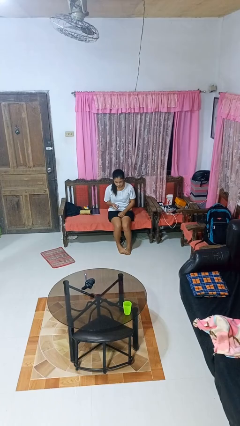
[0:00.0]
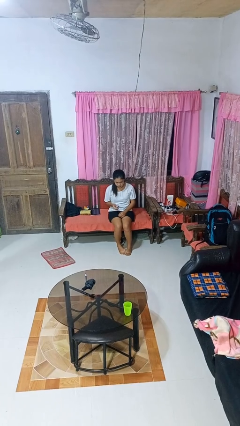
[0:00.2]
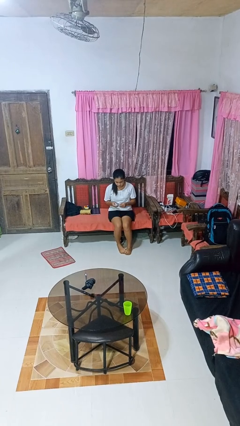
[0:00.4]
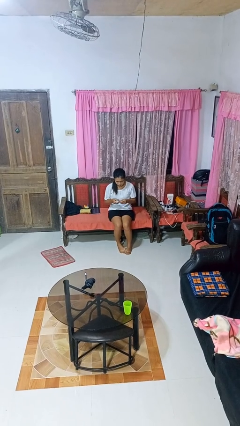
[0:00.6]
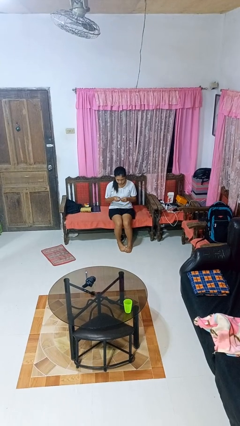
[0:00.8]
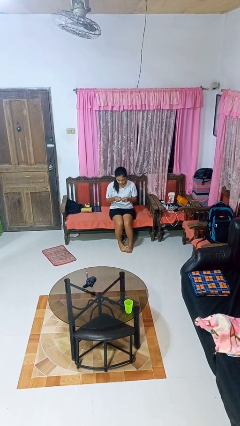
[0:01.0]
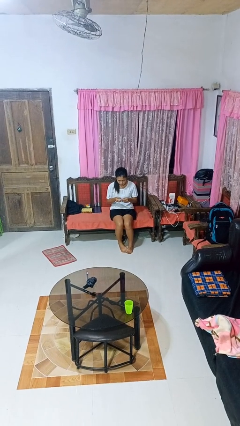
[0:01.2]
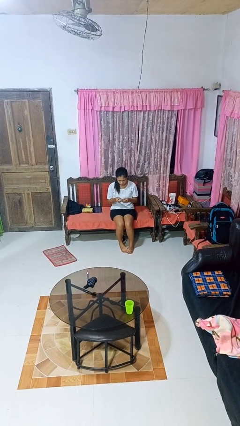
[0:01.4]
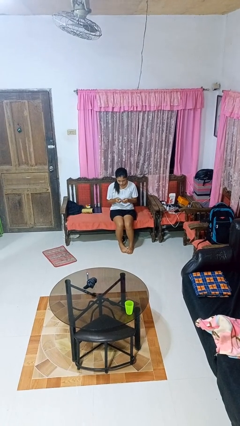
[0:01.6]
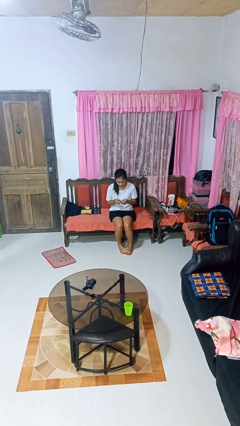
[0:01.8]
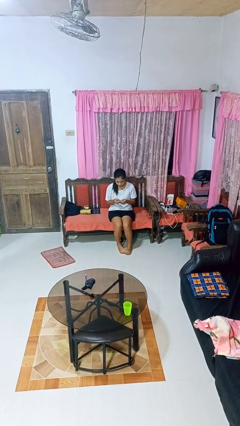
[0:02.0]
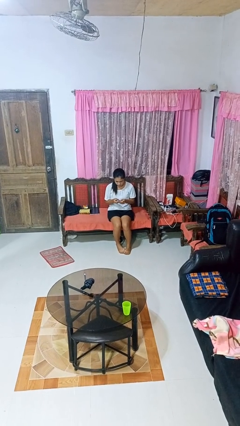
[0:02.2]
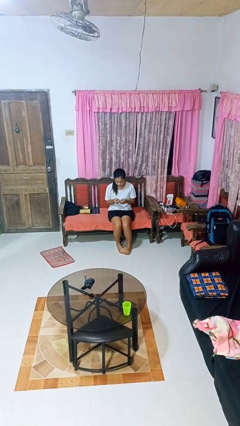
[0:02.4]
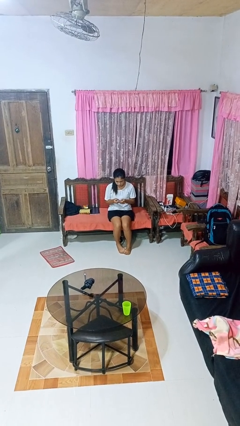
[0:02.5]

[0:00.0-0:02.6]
person clips fingernails

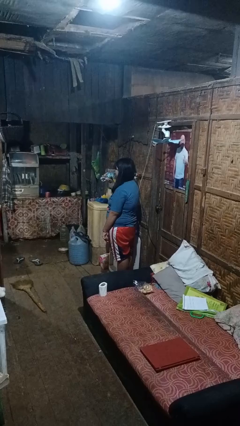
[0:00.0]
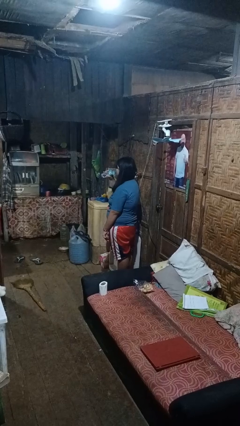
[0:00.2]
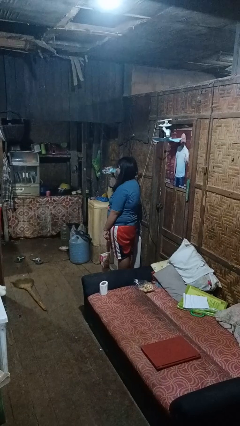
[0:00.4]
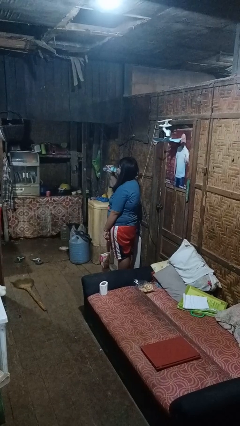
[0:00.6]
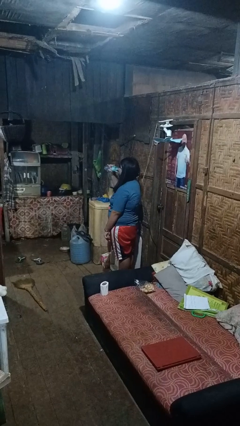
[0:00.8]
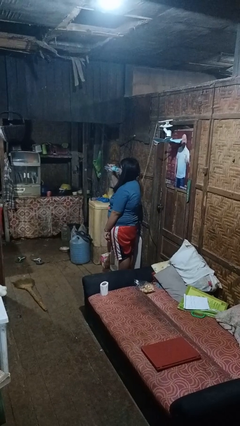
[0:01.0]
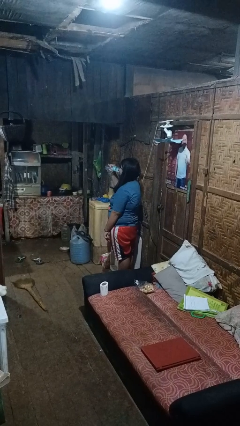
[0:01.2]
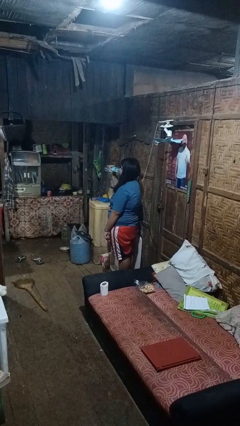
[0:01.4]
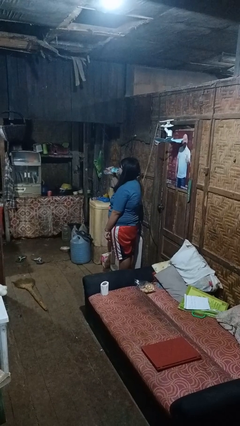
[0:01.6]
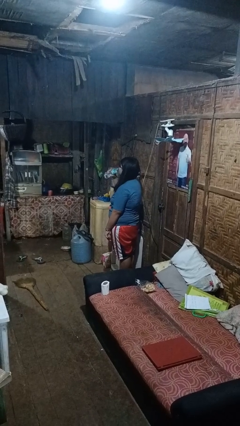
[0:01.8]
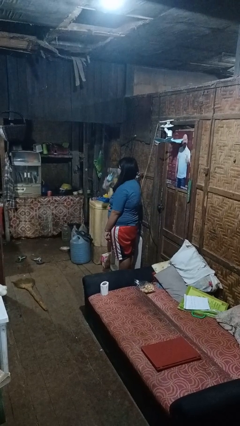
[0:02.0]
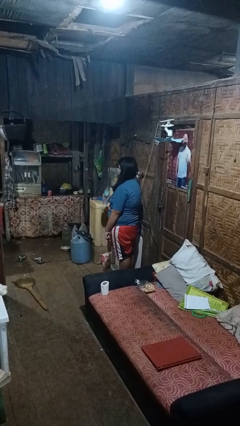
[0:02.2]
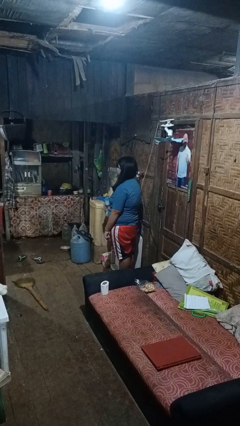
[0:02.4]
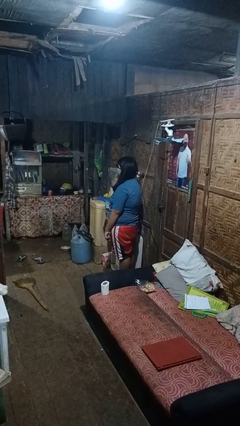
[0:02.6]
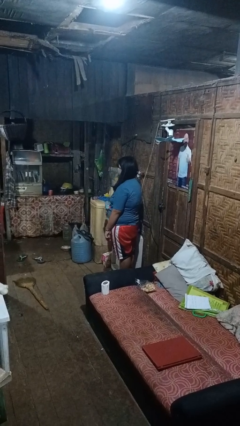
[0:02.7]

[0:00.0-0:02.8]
person drinks from bottle

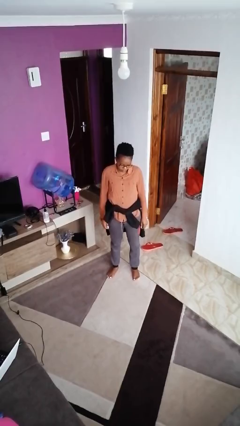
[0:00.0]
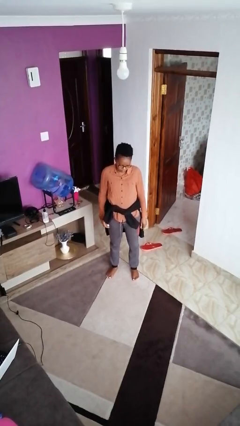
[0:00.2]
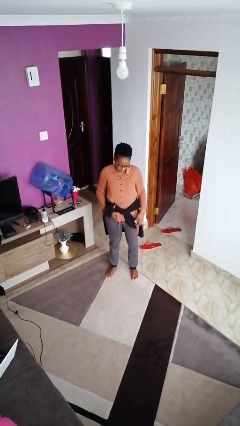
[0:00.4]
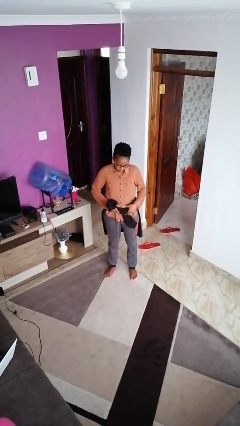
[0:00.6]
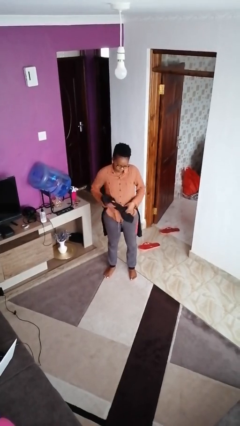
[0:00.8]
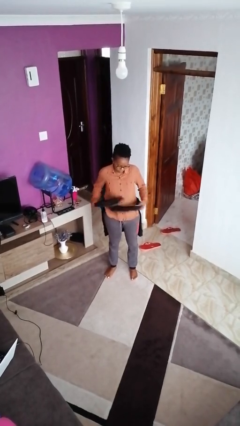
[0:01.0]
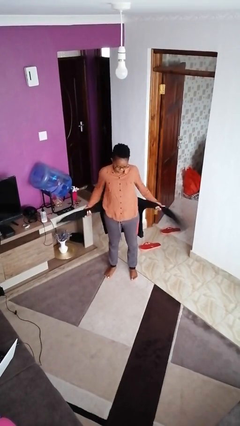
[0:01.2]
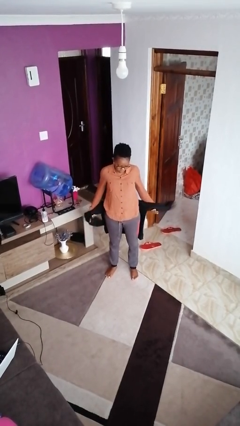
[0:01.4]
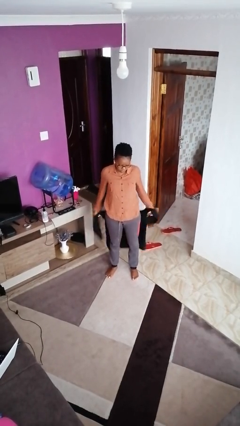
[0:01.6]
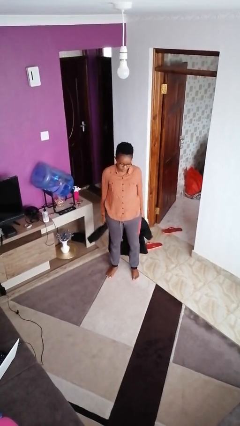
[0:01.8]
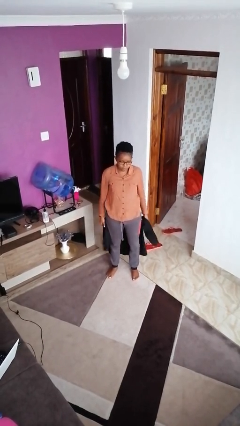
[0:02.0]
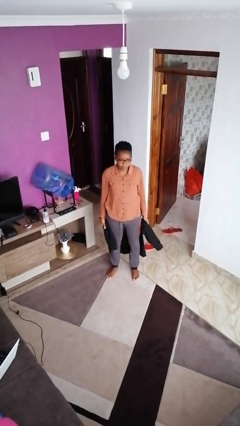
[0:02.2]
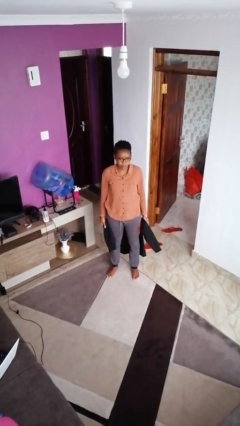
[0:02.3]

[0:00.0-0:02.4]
person unties jacket around waist

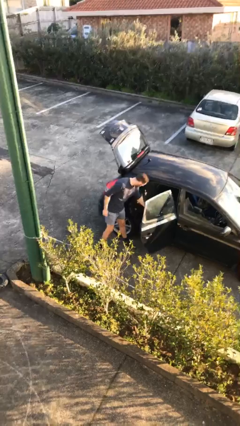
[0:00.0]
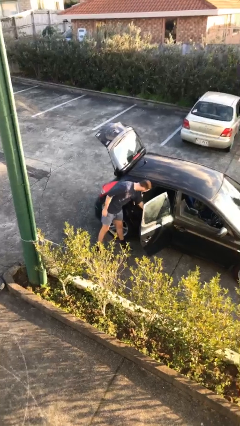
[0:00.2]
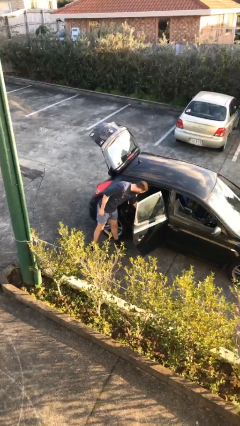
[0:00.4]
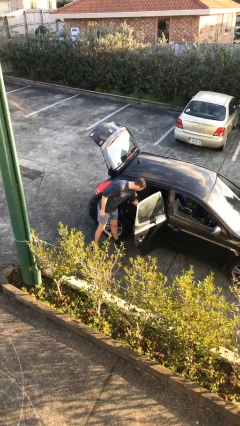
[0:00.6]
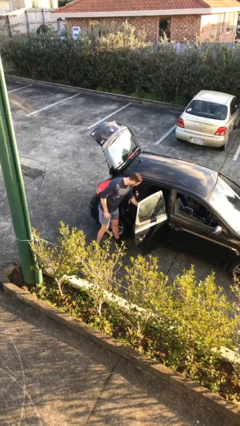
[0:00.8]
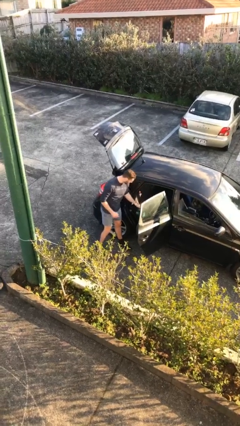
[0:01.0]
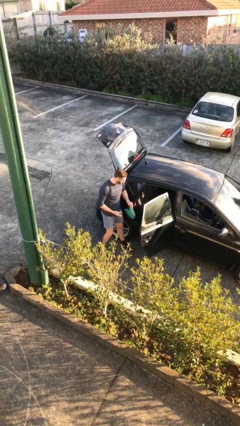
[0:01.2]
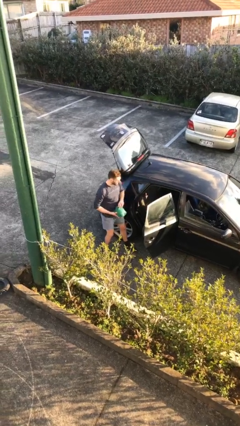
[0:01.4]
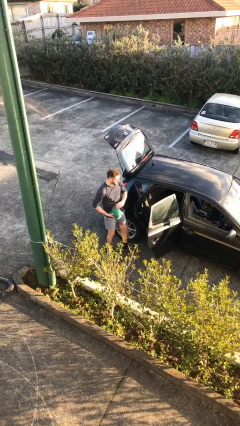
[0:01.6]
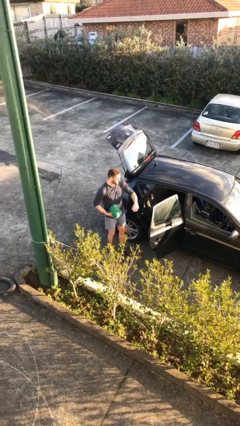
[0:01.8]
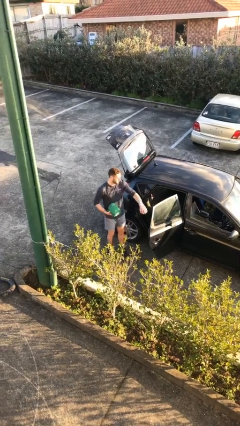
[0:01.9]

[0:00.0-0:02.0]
person unloads car

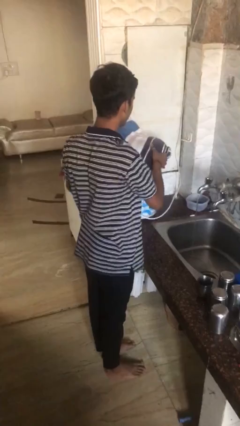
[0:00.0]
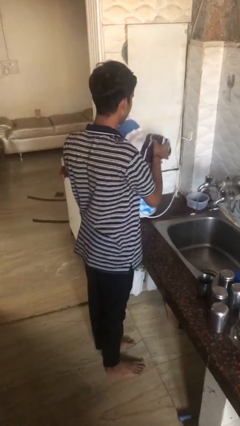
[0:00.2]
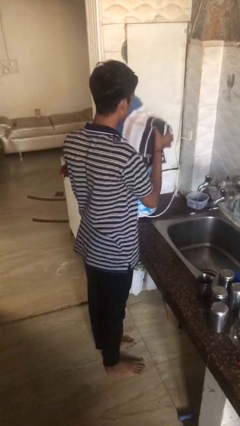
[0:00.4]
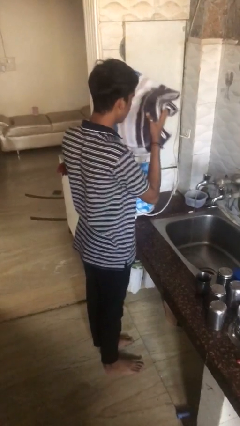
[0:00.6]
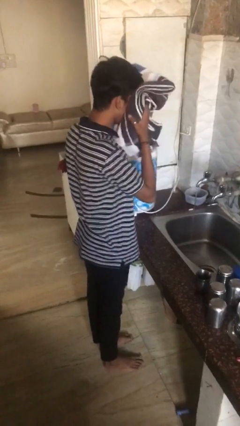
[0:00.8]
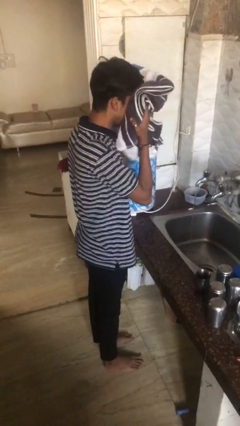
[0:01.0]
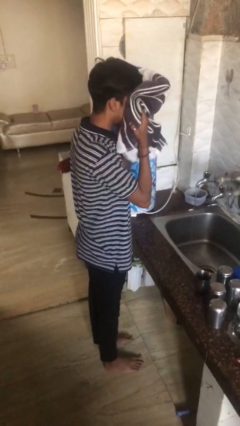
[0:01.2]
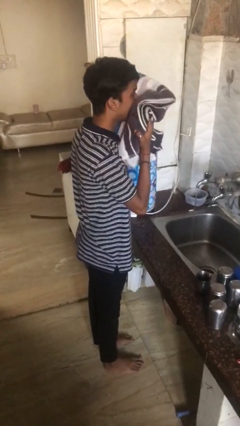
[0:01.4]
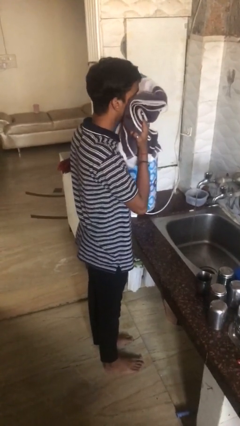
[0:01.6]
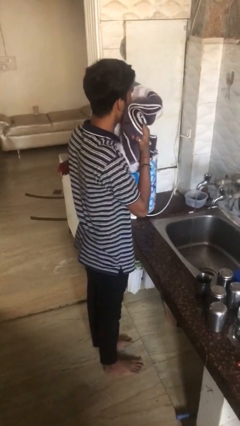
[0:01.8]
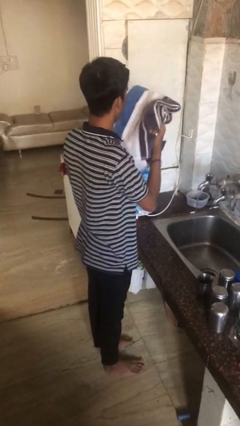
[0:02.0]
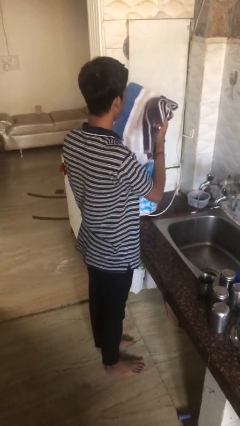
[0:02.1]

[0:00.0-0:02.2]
person dries face with towel

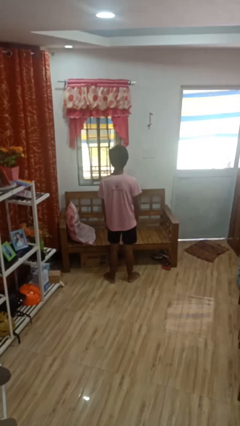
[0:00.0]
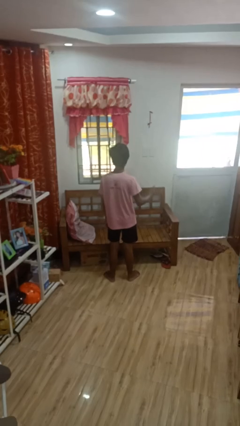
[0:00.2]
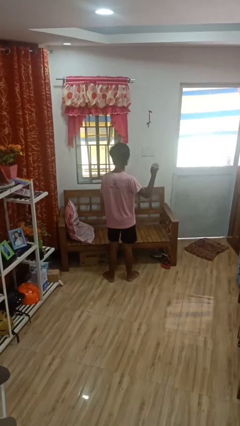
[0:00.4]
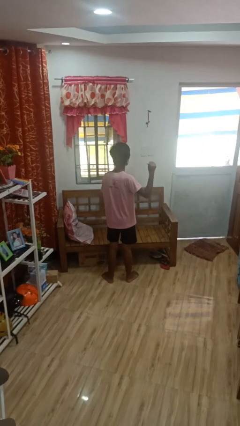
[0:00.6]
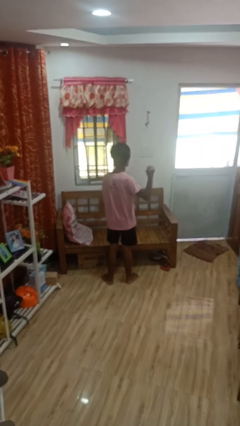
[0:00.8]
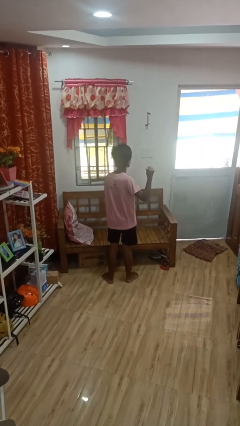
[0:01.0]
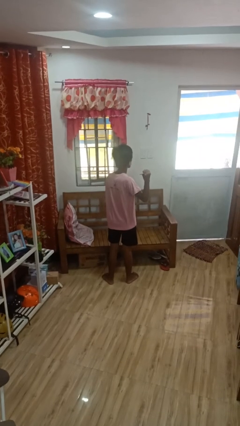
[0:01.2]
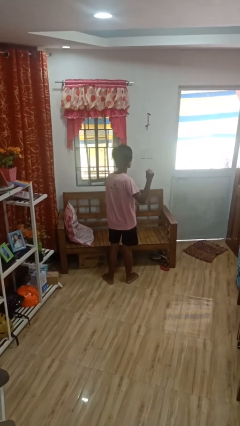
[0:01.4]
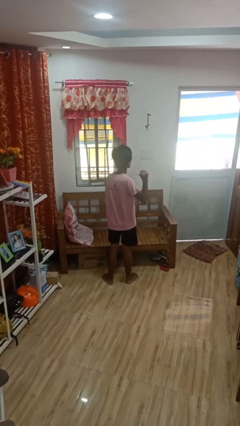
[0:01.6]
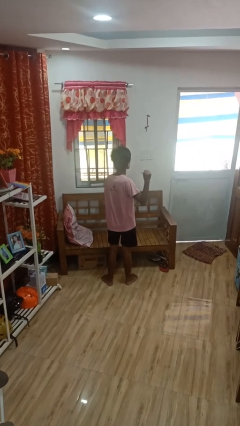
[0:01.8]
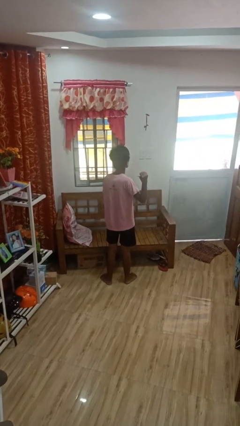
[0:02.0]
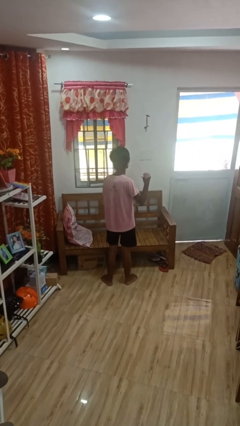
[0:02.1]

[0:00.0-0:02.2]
person gestures behind me

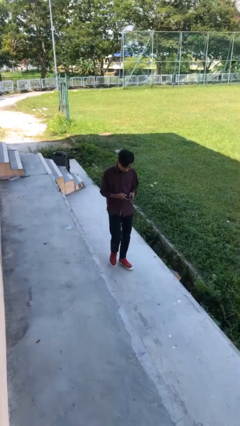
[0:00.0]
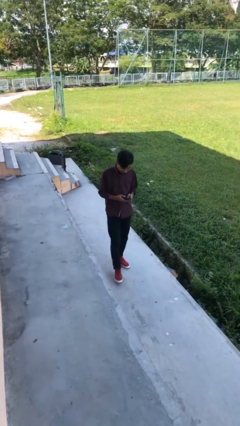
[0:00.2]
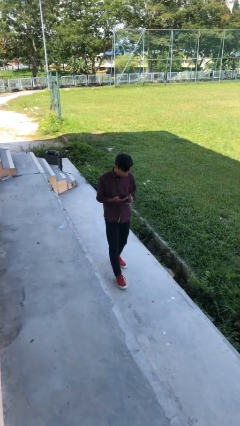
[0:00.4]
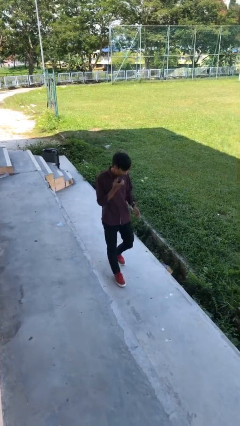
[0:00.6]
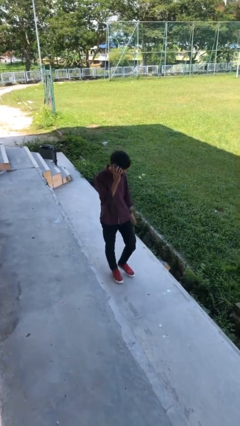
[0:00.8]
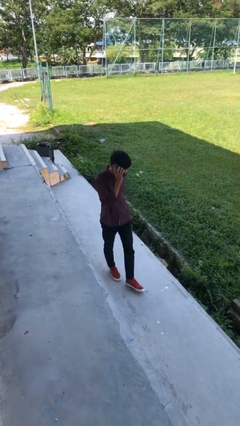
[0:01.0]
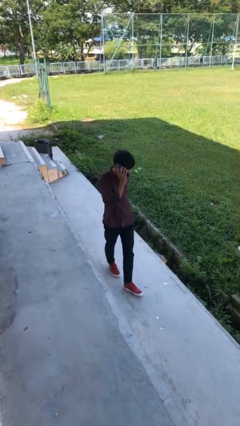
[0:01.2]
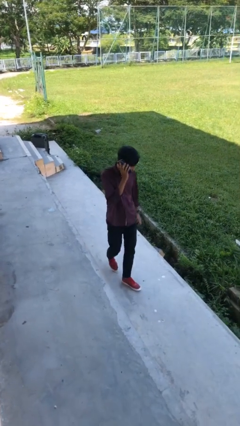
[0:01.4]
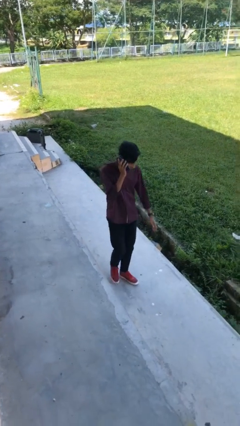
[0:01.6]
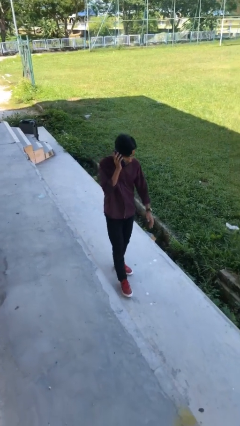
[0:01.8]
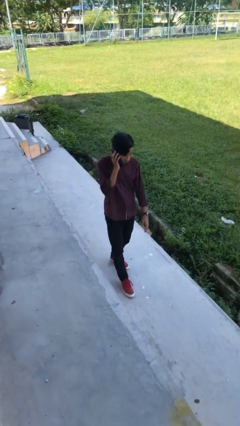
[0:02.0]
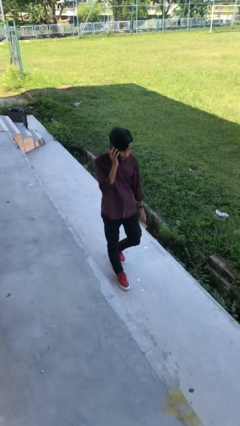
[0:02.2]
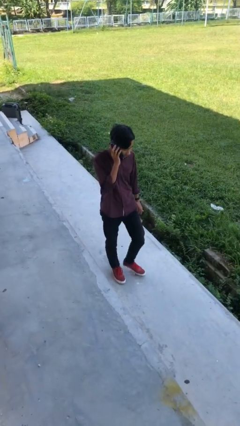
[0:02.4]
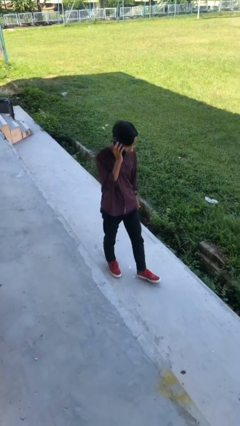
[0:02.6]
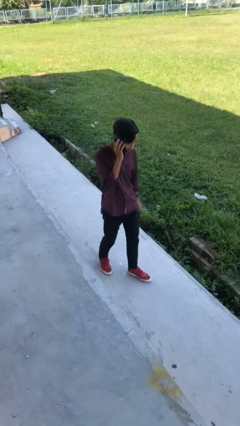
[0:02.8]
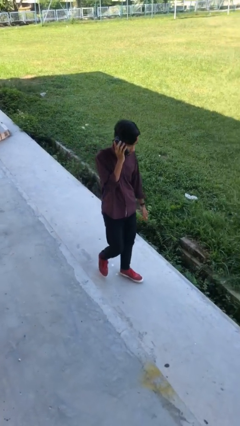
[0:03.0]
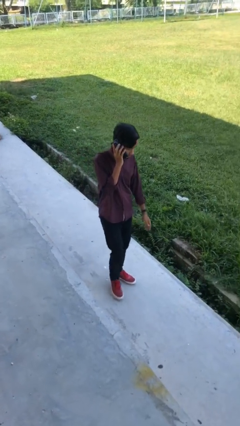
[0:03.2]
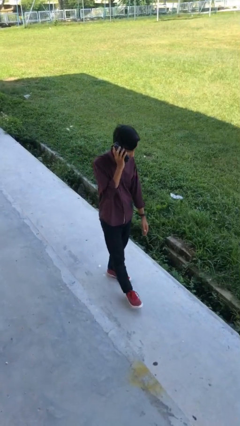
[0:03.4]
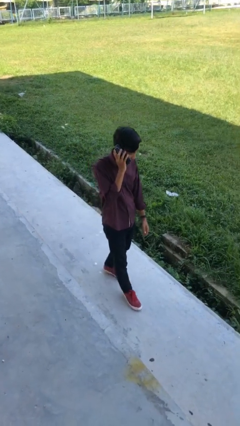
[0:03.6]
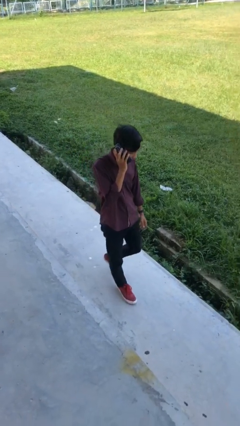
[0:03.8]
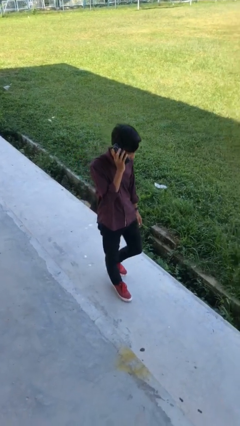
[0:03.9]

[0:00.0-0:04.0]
person talks on phone
